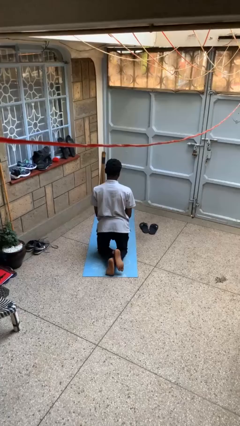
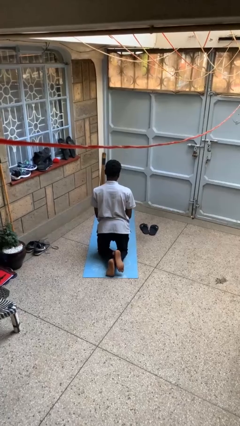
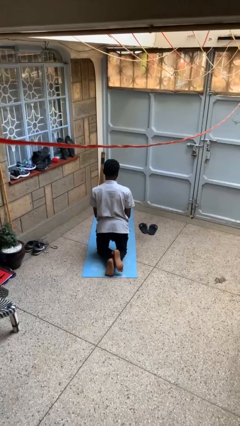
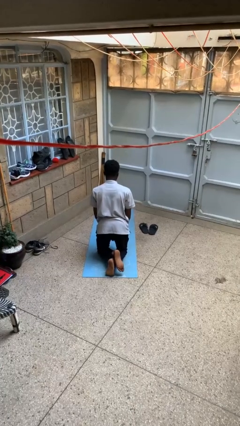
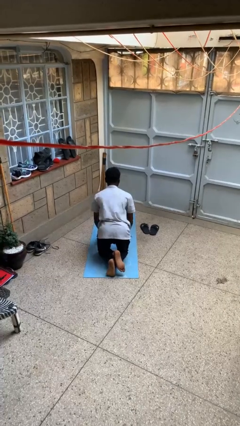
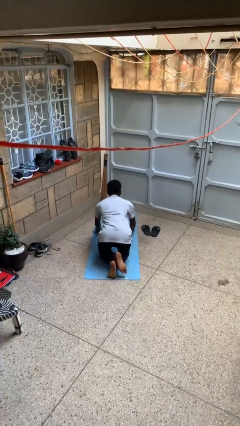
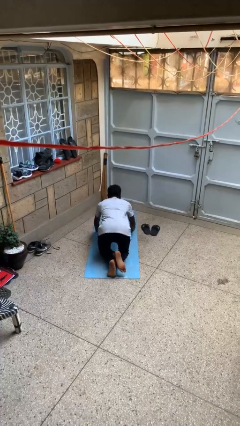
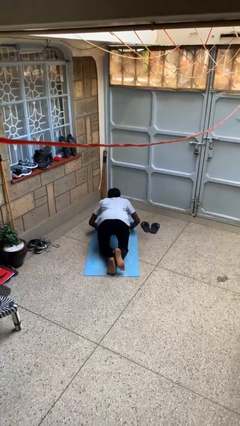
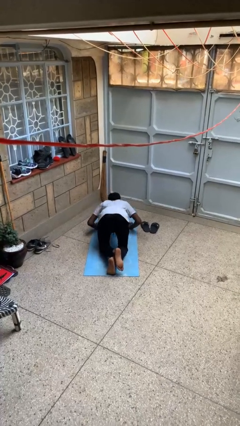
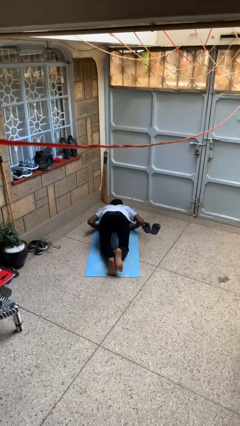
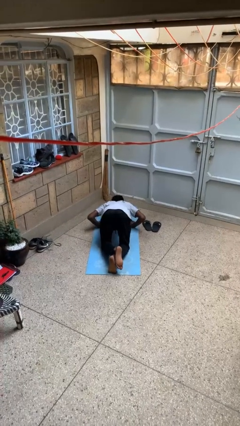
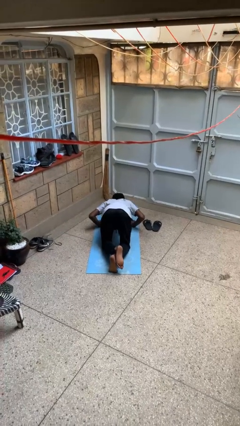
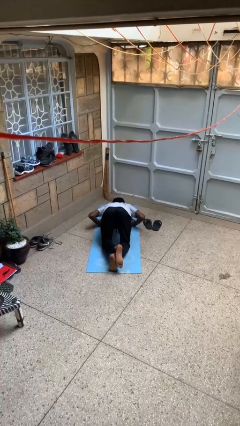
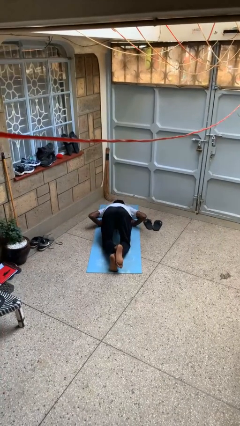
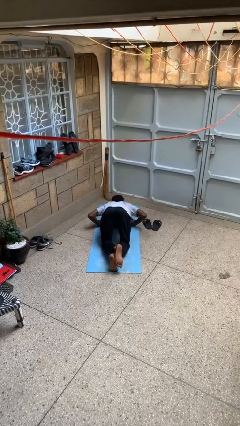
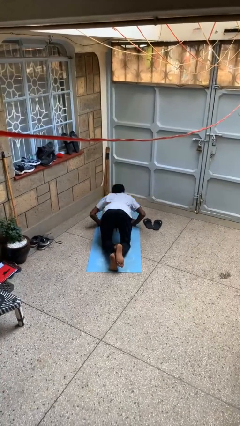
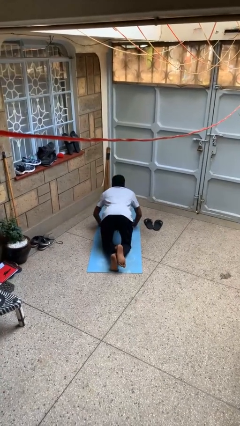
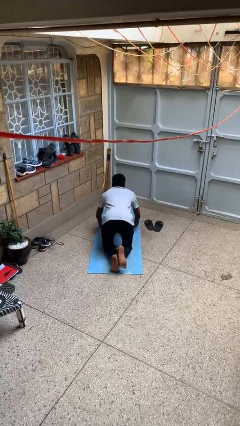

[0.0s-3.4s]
person exercises with pushup

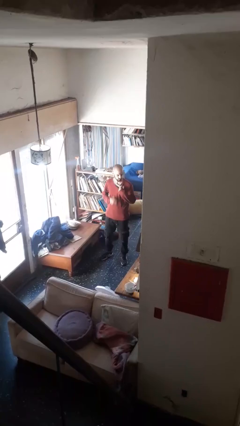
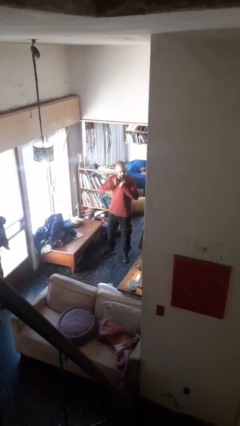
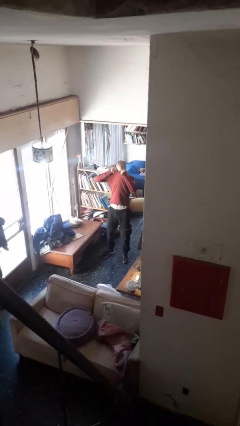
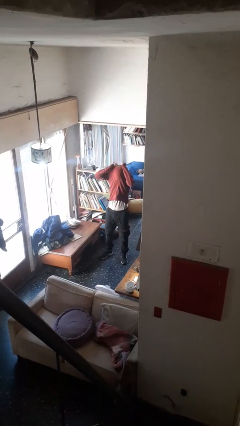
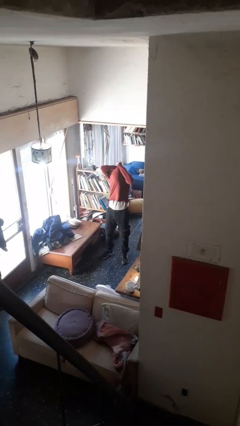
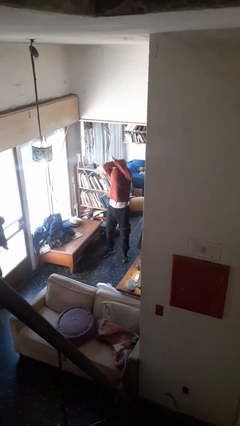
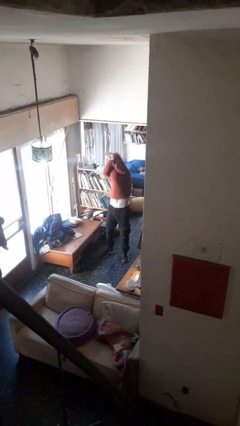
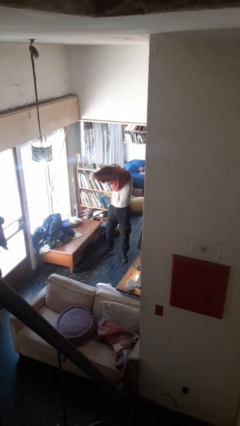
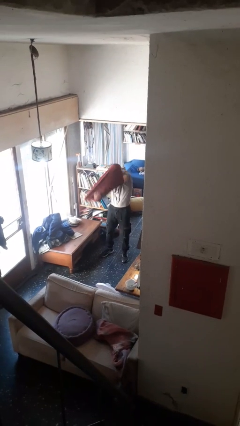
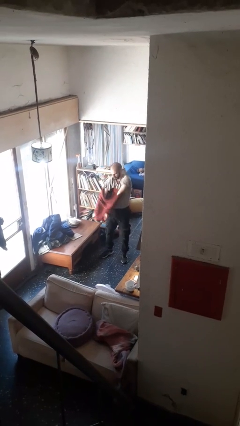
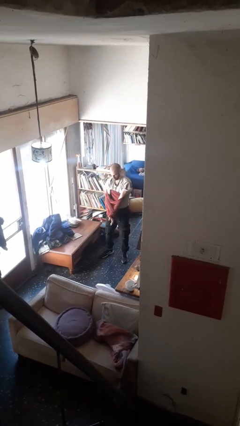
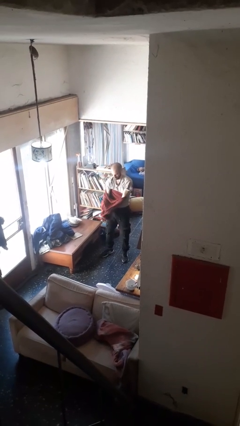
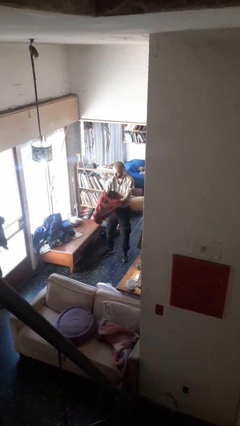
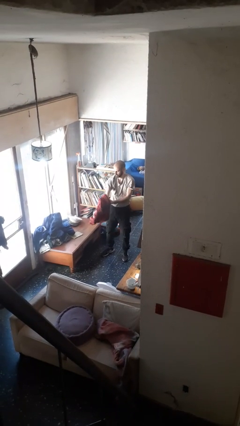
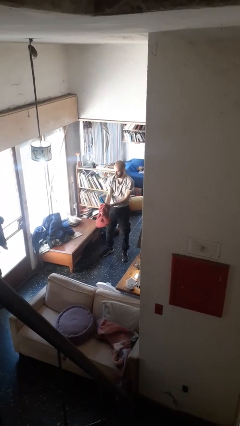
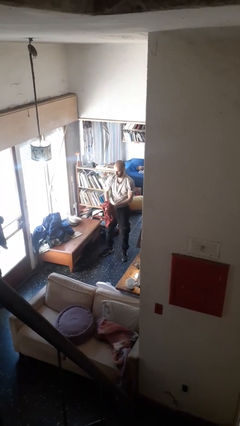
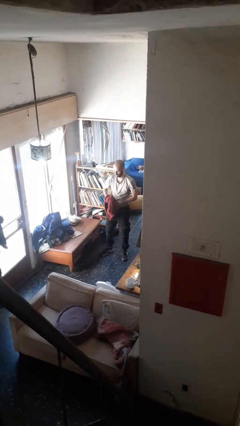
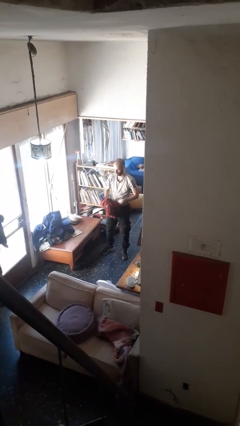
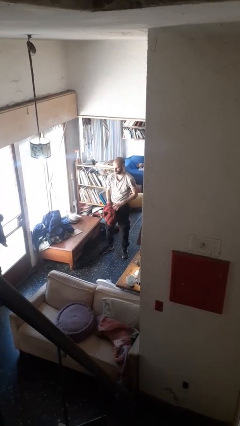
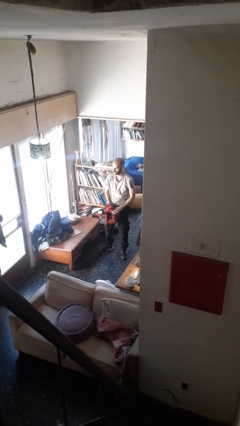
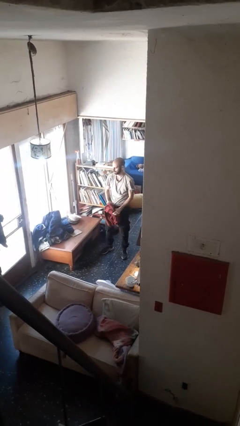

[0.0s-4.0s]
person takes off shirt

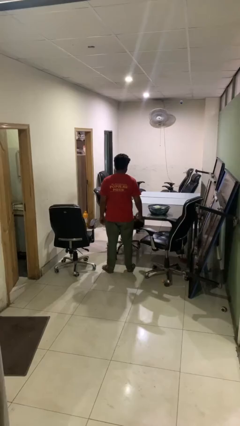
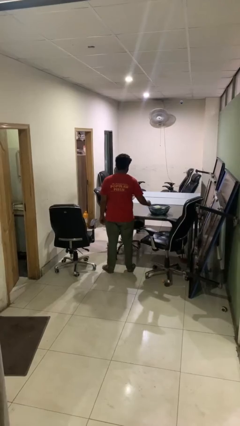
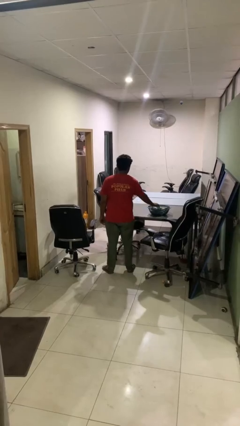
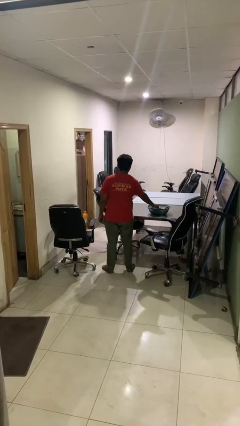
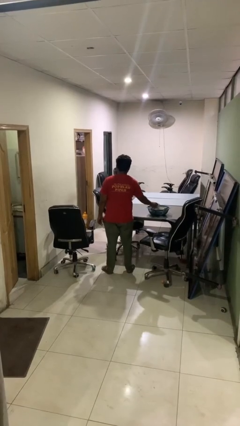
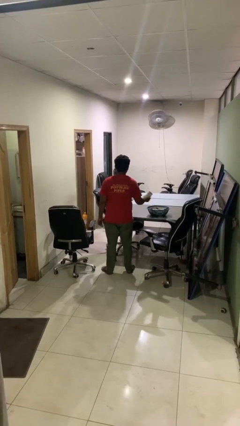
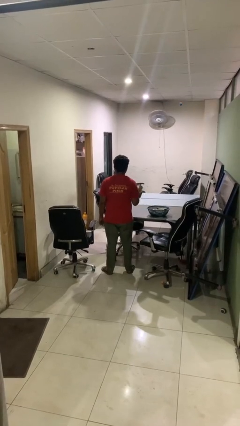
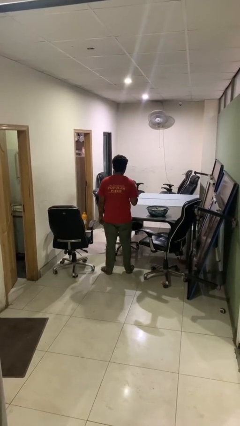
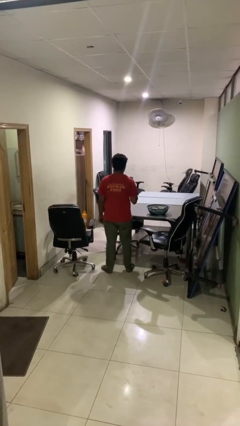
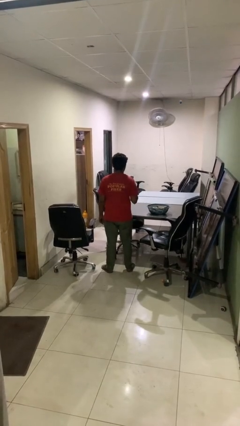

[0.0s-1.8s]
person takes object from basket

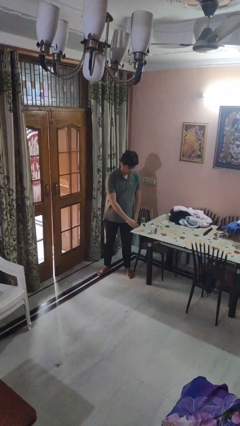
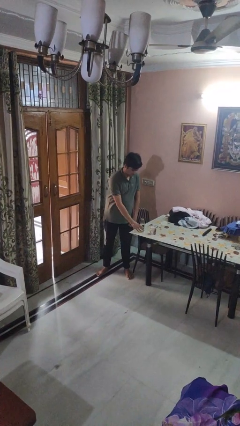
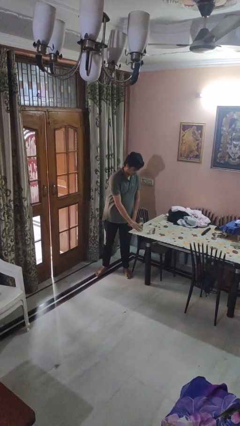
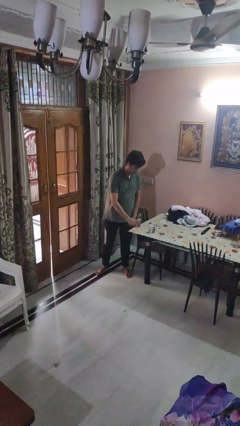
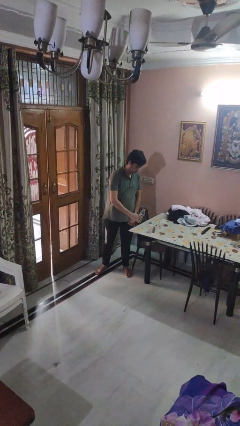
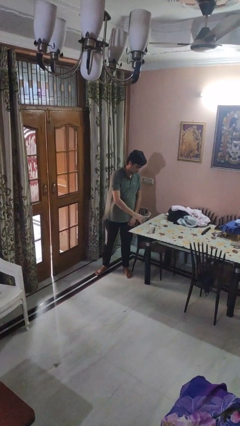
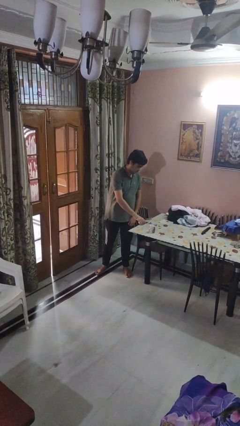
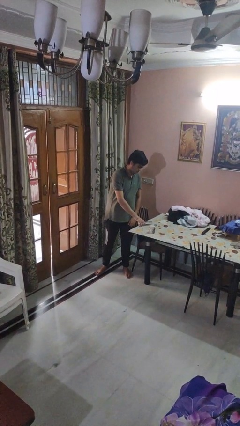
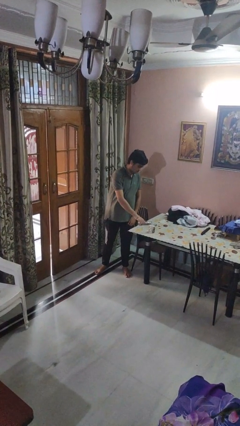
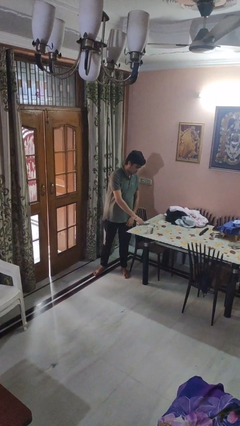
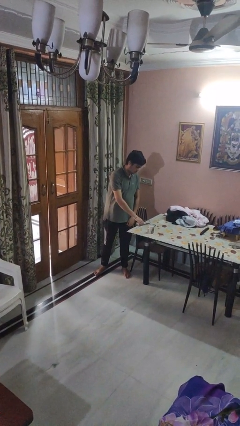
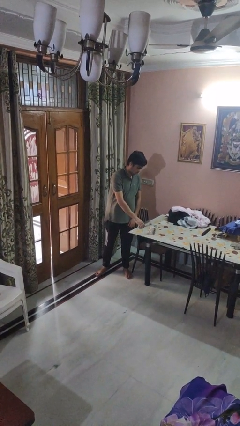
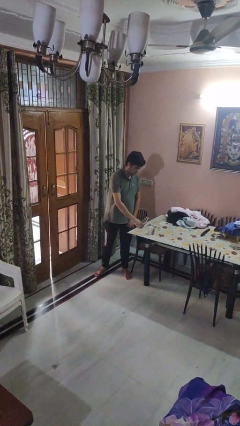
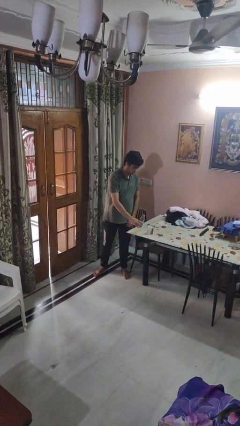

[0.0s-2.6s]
person pours liquid into cup

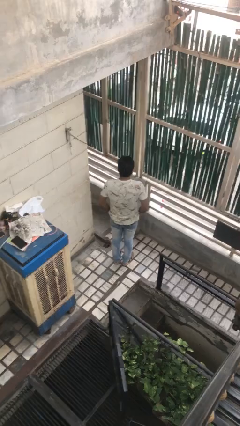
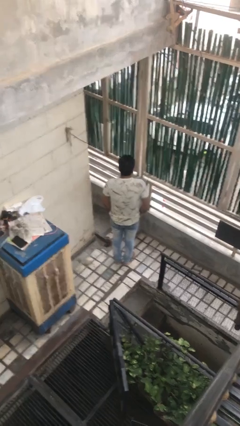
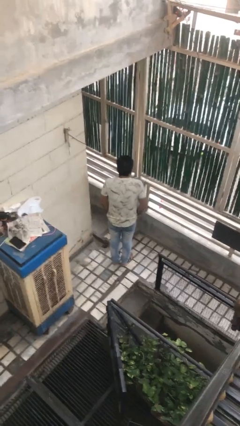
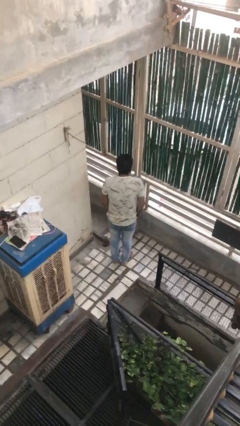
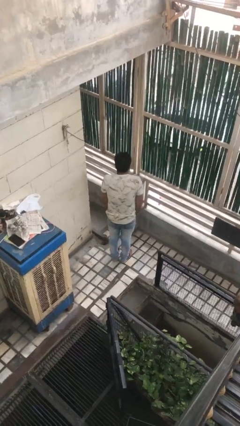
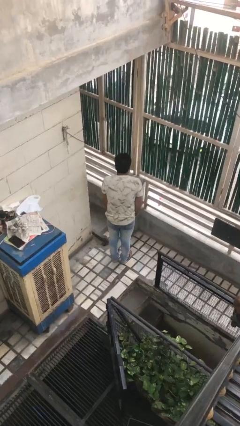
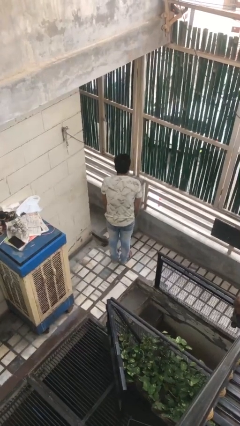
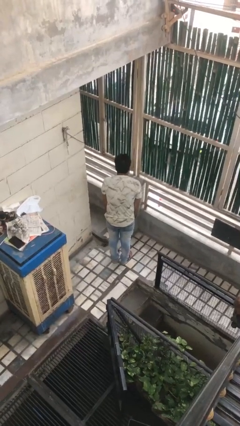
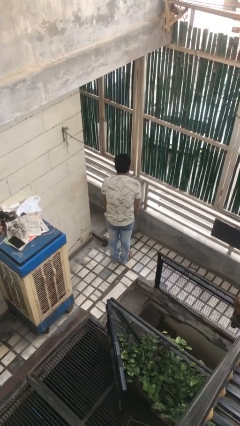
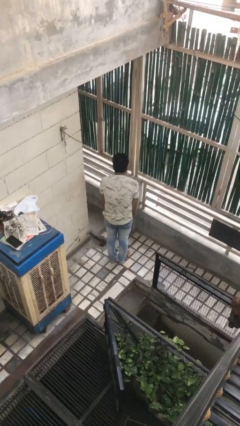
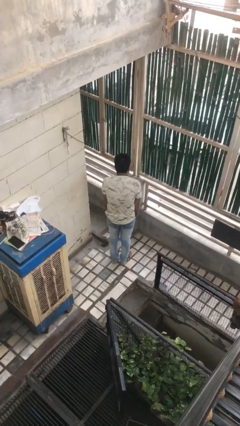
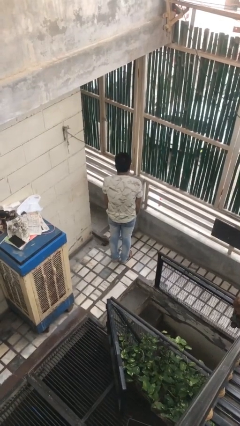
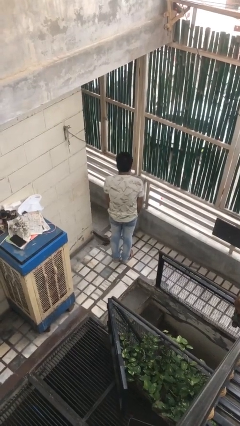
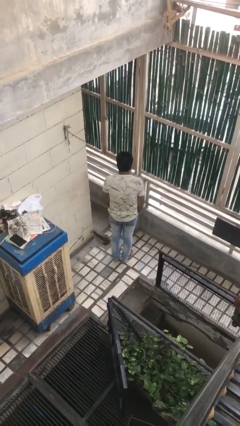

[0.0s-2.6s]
person puts hands in back pockets

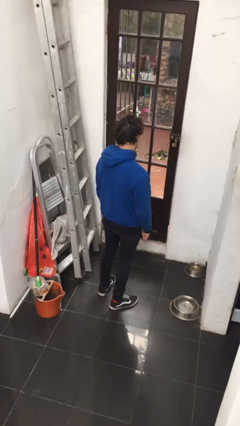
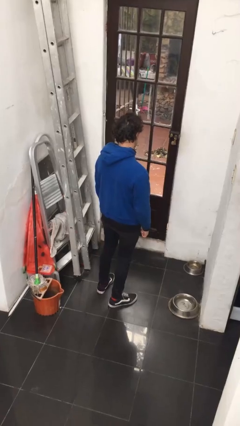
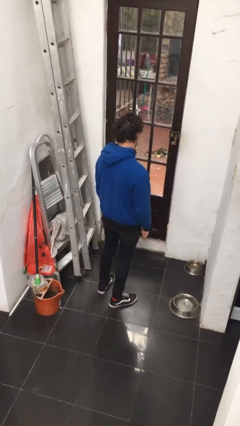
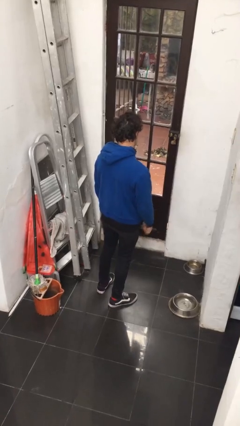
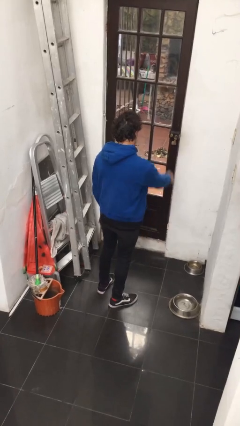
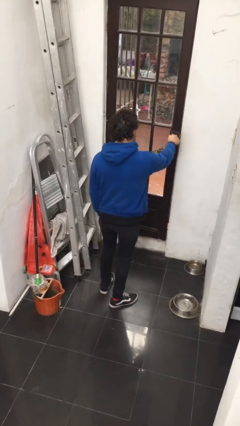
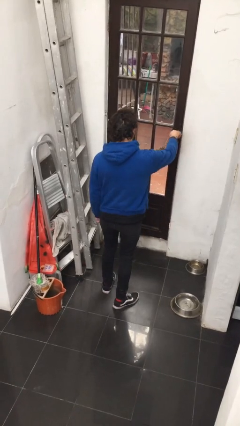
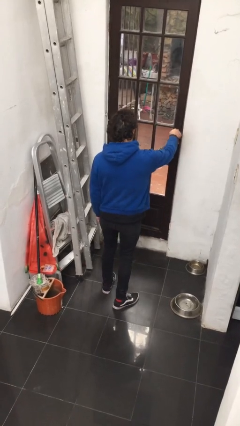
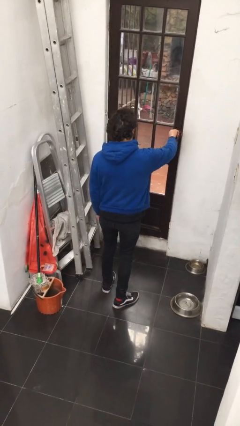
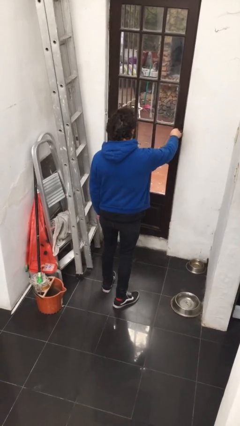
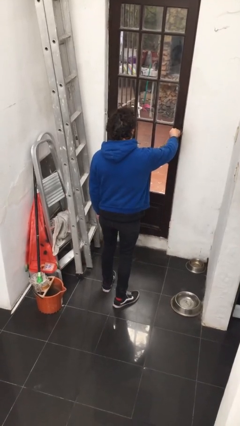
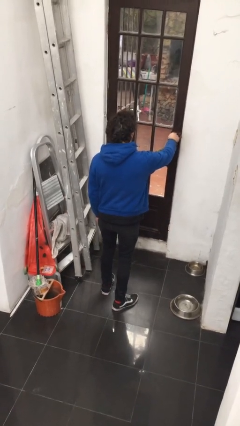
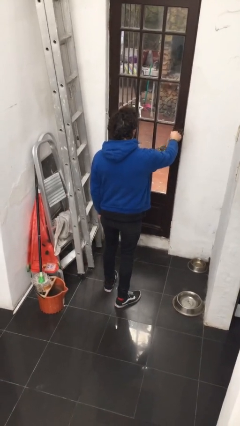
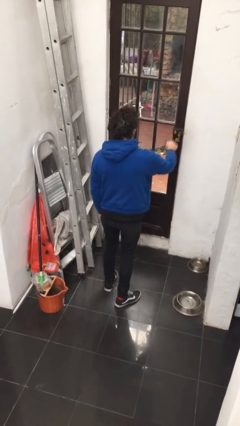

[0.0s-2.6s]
person unlocks door with keys

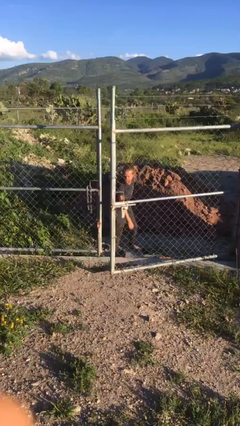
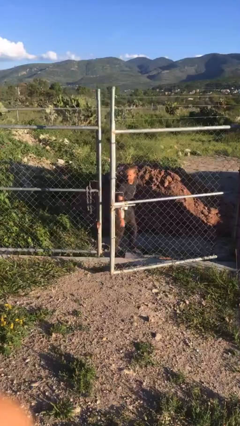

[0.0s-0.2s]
person closes gate
